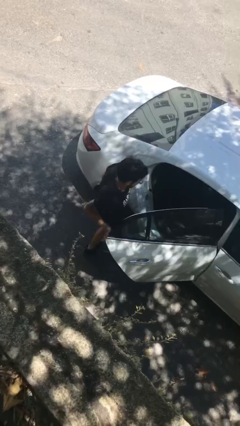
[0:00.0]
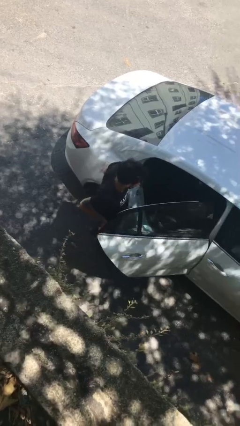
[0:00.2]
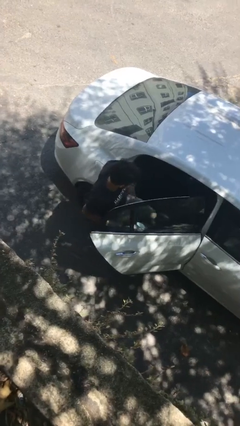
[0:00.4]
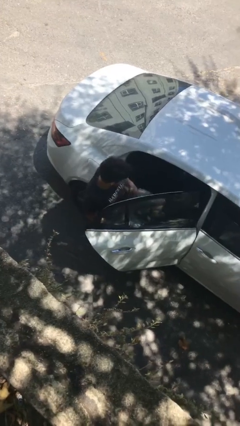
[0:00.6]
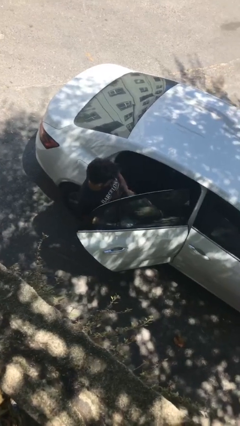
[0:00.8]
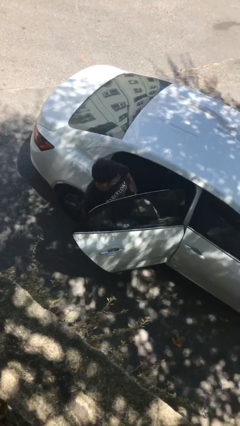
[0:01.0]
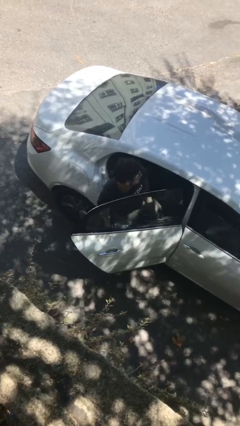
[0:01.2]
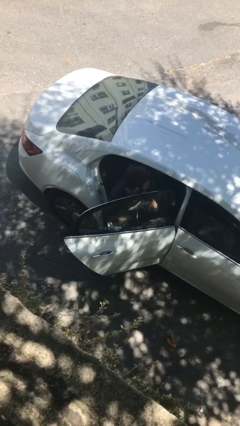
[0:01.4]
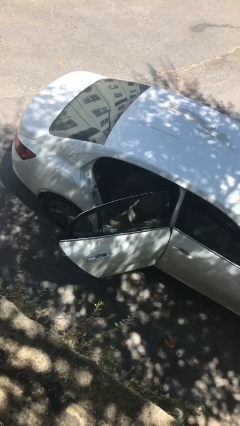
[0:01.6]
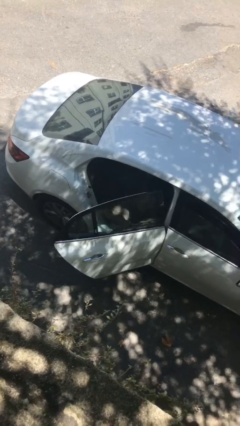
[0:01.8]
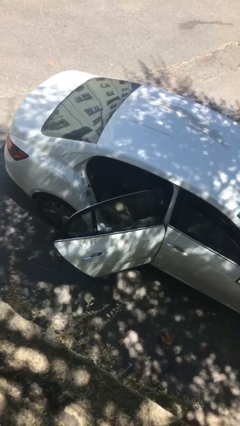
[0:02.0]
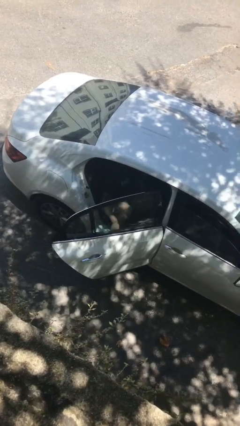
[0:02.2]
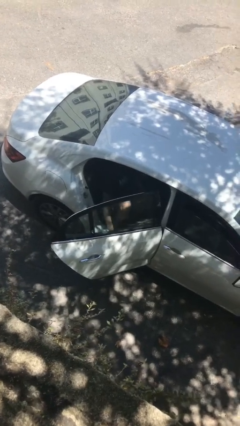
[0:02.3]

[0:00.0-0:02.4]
person enters car

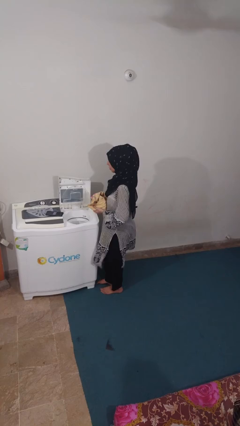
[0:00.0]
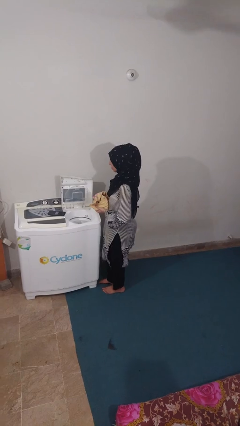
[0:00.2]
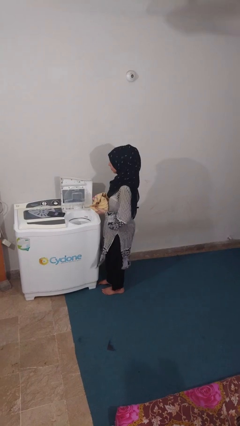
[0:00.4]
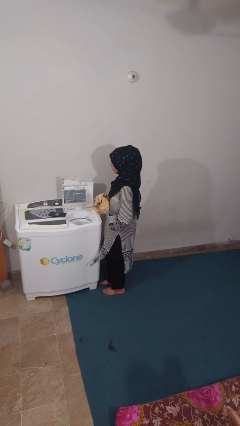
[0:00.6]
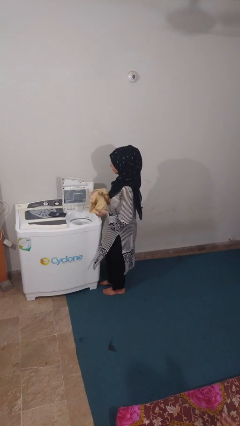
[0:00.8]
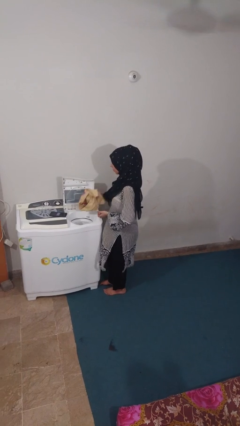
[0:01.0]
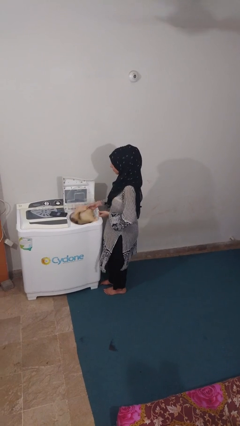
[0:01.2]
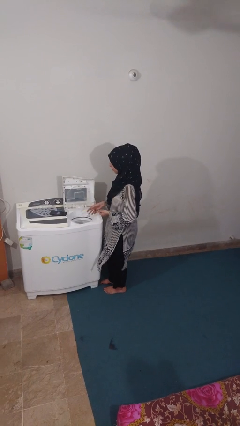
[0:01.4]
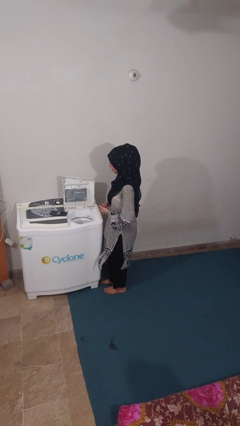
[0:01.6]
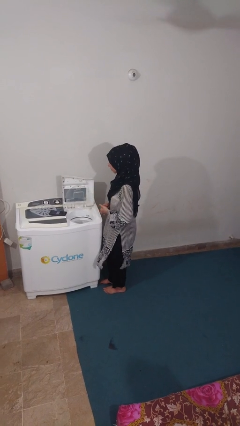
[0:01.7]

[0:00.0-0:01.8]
person loads dryer

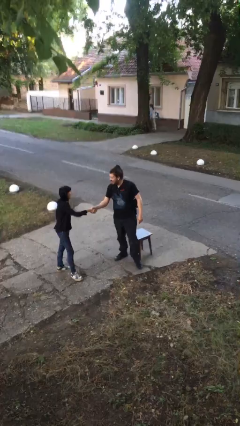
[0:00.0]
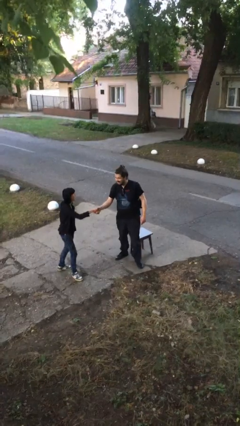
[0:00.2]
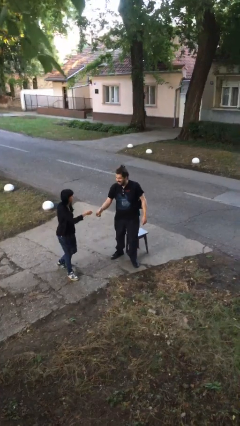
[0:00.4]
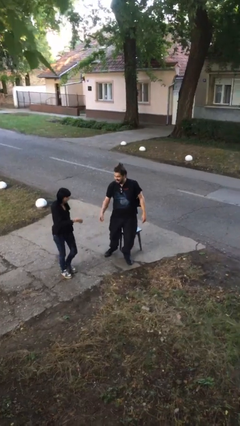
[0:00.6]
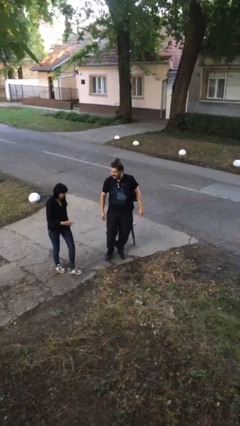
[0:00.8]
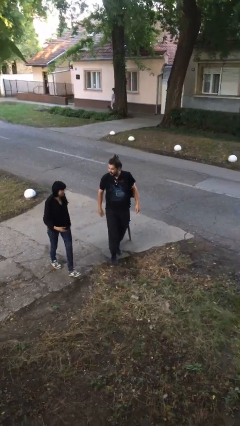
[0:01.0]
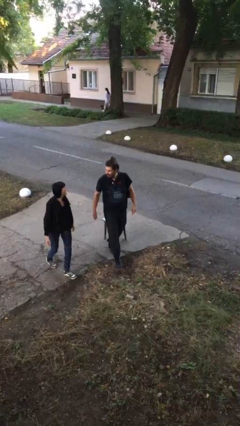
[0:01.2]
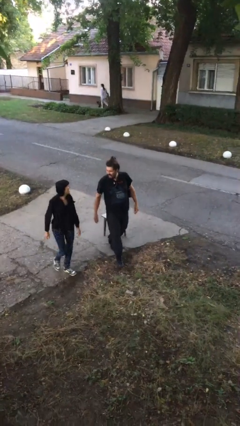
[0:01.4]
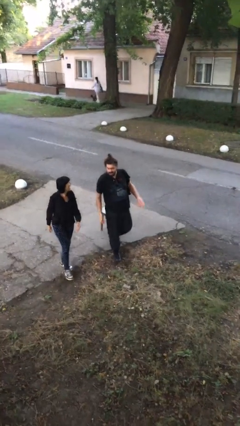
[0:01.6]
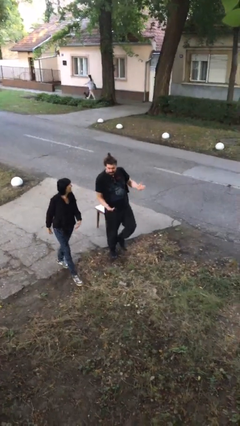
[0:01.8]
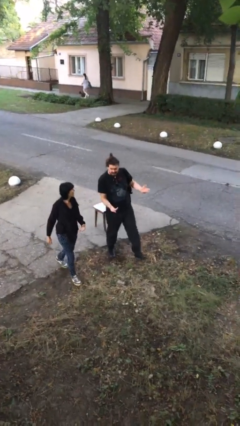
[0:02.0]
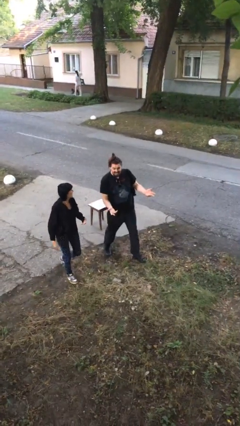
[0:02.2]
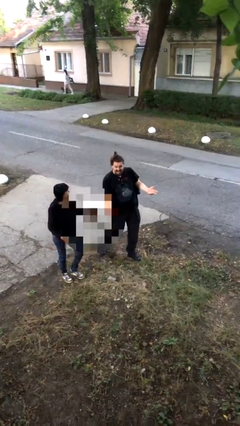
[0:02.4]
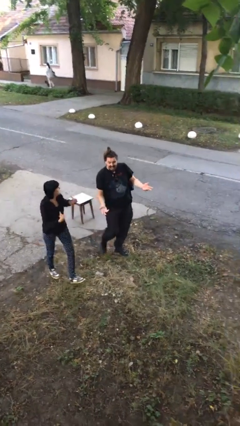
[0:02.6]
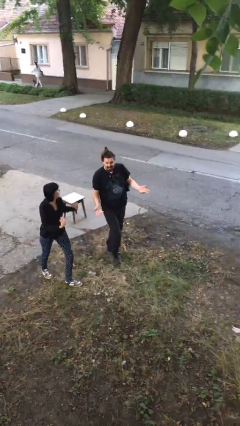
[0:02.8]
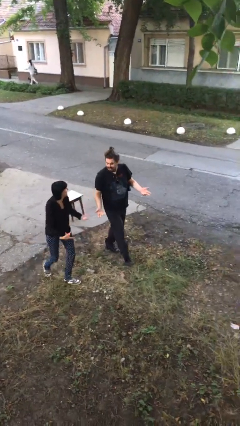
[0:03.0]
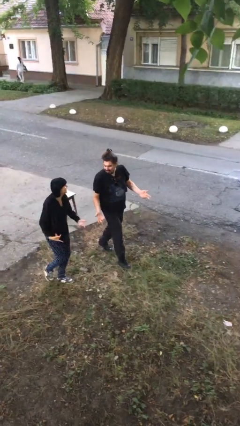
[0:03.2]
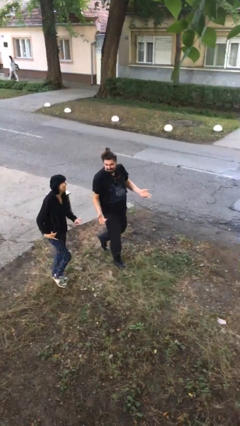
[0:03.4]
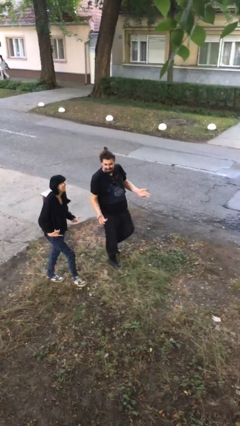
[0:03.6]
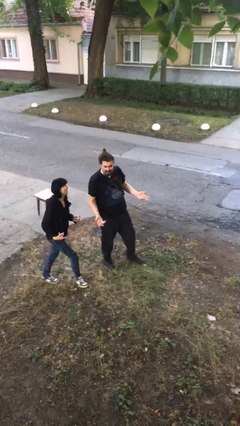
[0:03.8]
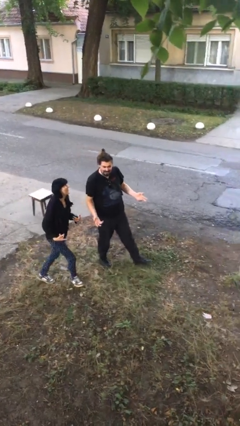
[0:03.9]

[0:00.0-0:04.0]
person talks to person

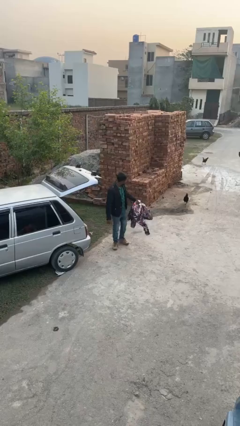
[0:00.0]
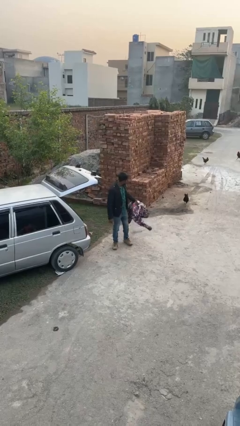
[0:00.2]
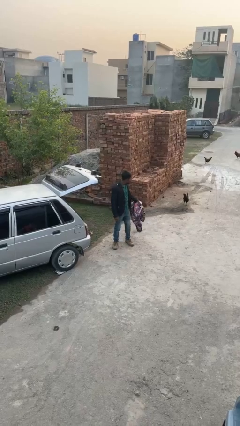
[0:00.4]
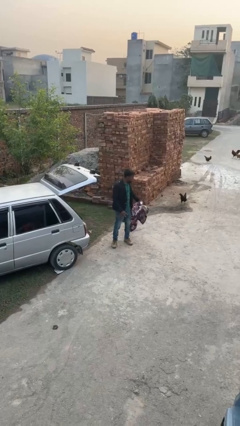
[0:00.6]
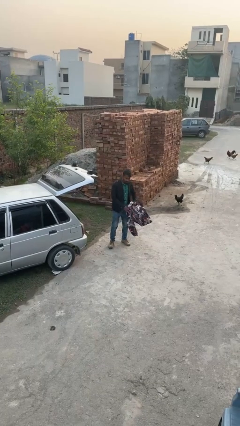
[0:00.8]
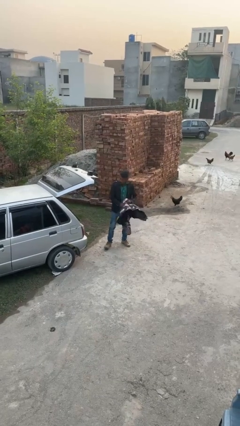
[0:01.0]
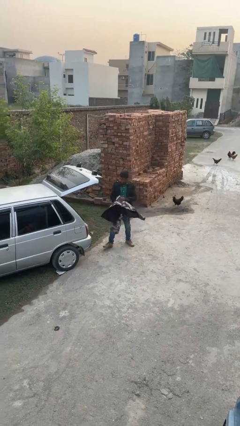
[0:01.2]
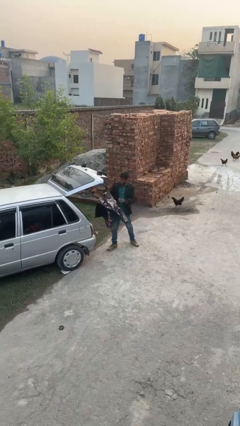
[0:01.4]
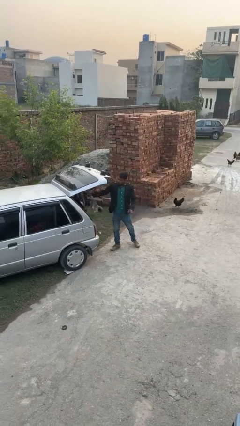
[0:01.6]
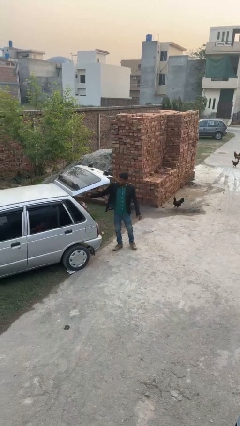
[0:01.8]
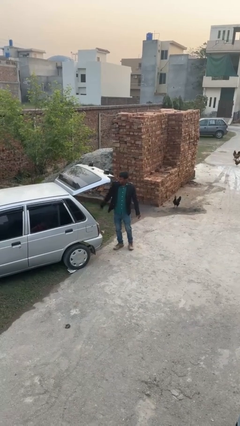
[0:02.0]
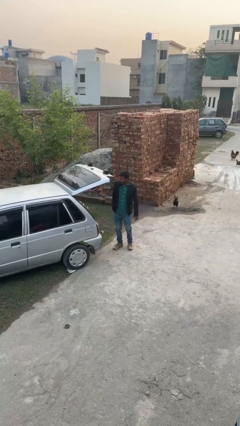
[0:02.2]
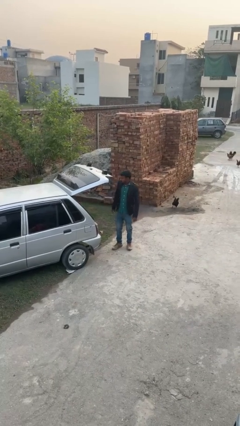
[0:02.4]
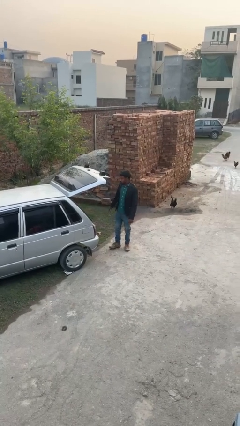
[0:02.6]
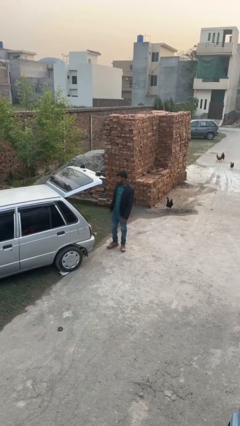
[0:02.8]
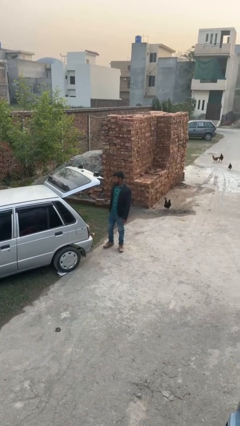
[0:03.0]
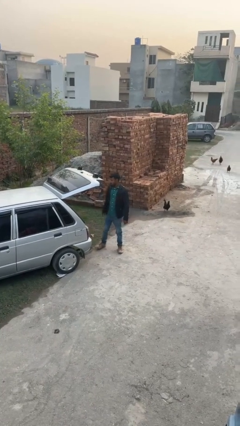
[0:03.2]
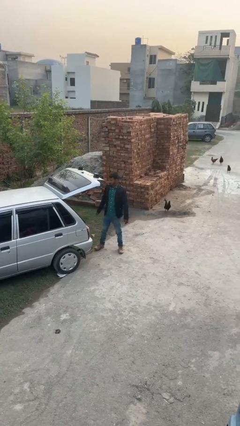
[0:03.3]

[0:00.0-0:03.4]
person loads car

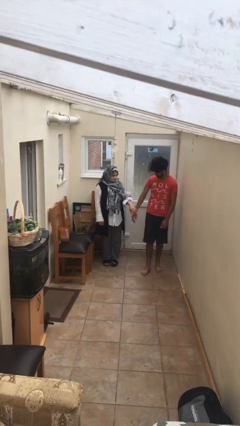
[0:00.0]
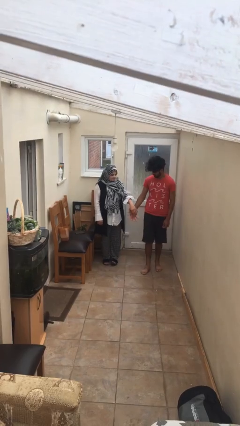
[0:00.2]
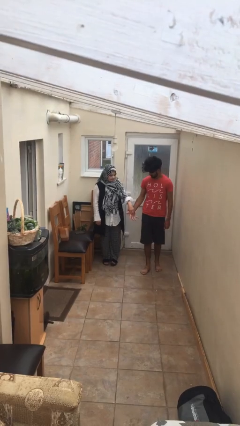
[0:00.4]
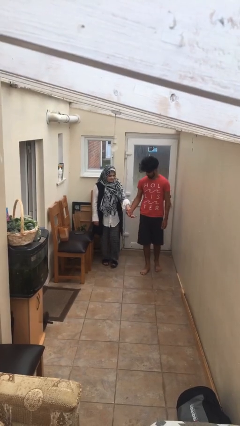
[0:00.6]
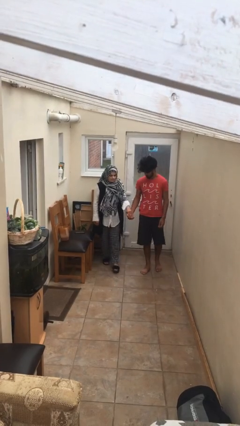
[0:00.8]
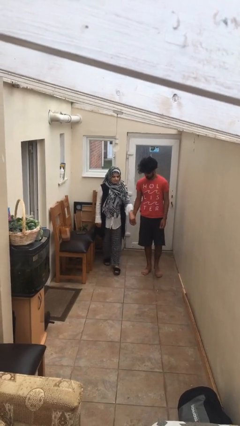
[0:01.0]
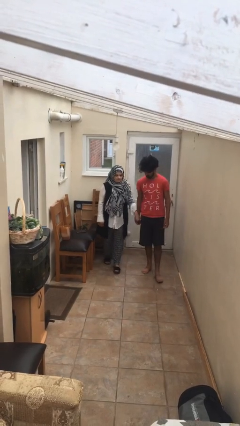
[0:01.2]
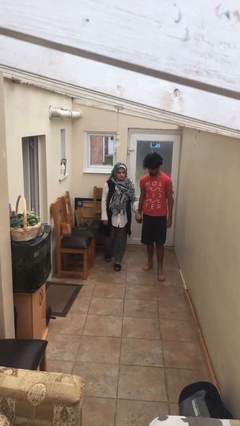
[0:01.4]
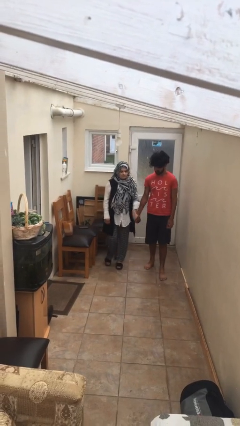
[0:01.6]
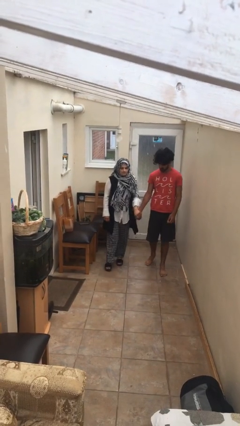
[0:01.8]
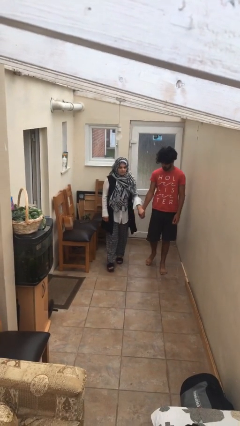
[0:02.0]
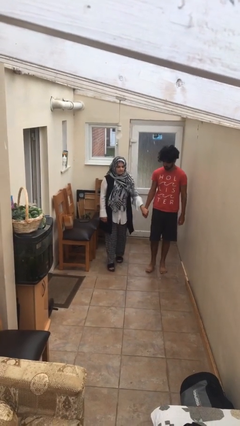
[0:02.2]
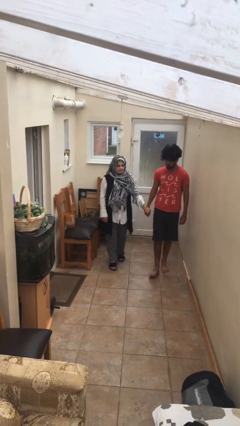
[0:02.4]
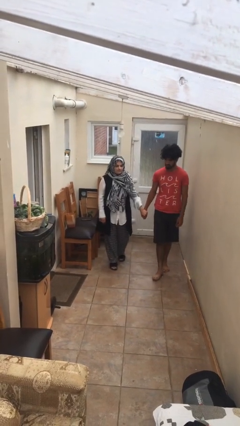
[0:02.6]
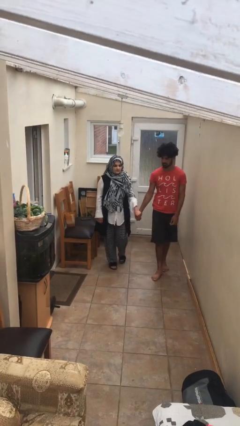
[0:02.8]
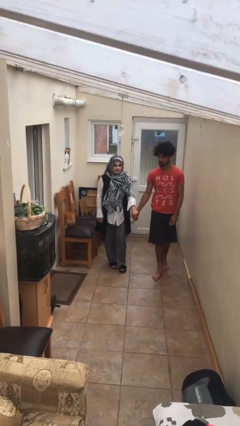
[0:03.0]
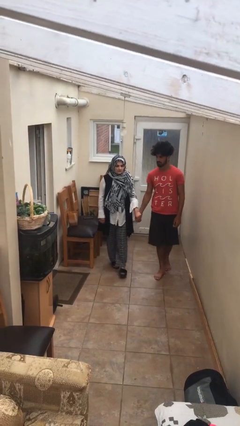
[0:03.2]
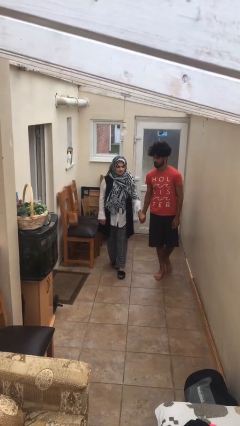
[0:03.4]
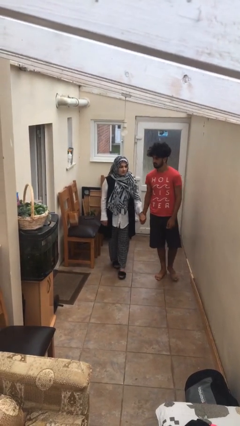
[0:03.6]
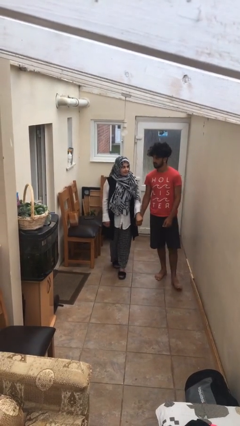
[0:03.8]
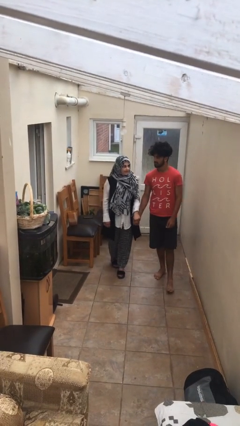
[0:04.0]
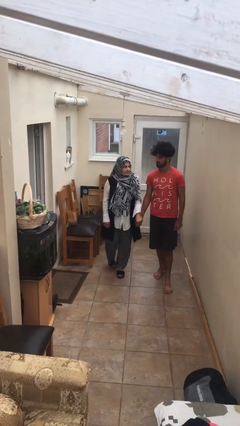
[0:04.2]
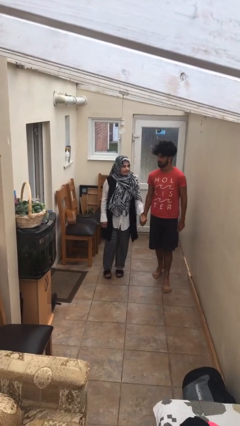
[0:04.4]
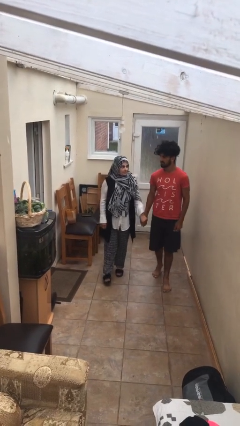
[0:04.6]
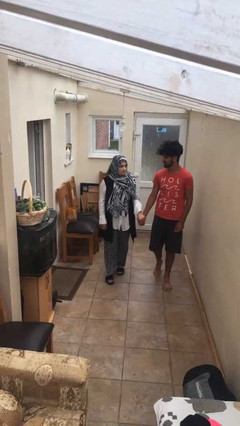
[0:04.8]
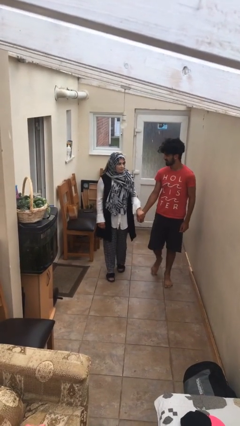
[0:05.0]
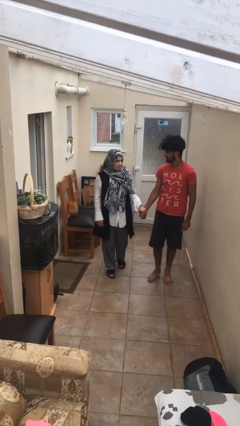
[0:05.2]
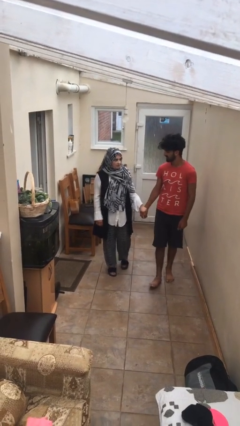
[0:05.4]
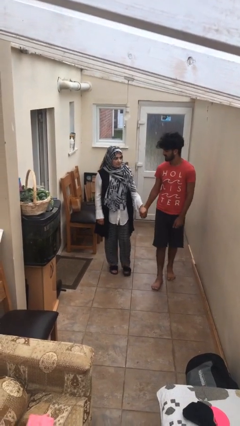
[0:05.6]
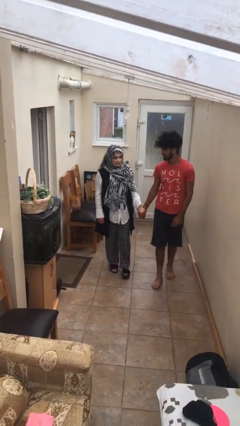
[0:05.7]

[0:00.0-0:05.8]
person holds hand

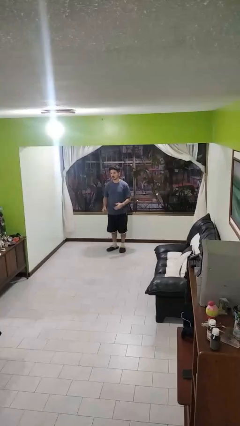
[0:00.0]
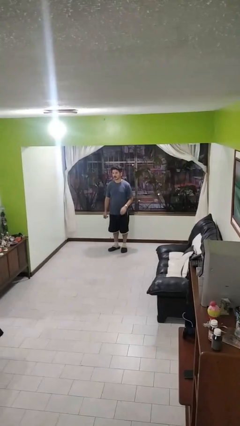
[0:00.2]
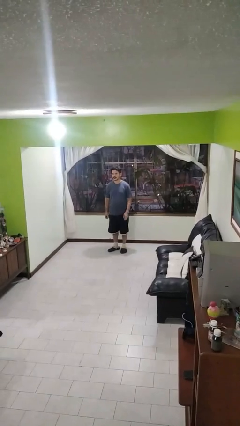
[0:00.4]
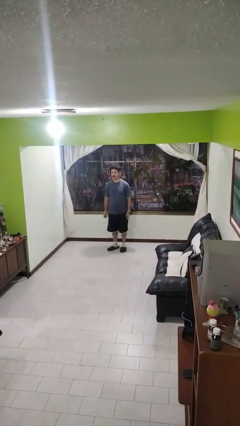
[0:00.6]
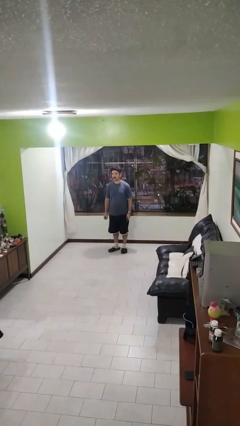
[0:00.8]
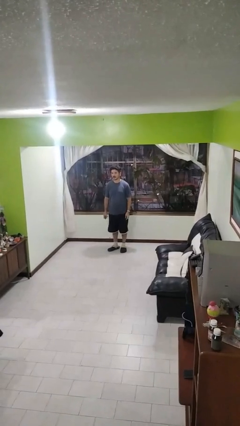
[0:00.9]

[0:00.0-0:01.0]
person takes off ring
